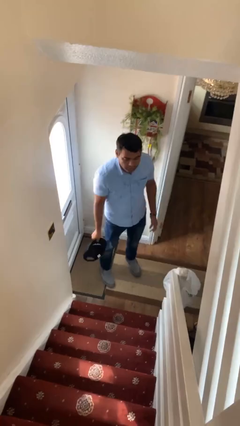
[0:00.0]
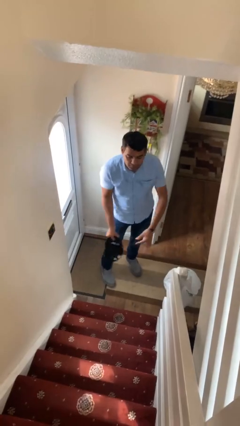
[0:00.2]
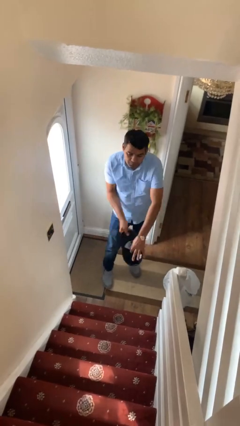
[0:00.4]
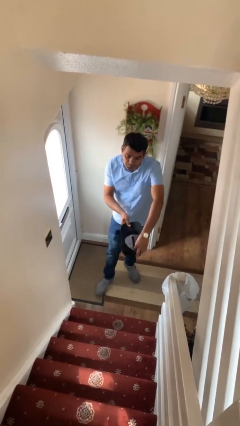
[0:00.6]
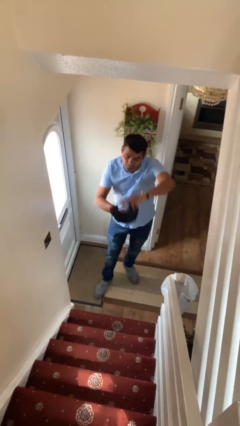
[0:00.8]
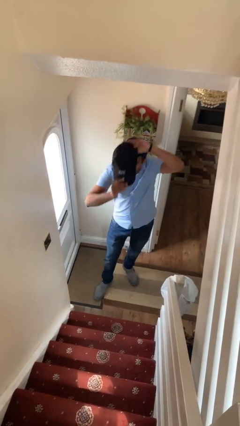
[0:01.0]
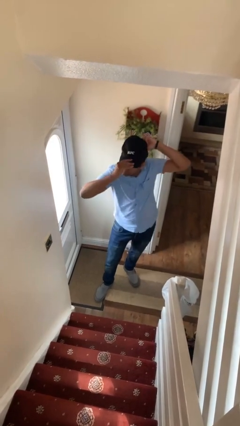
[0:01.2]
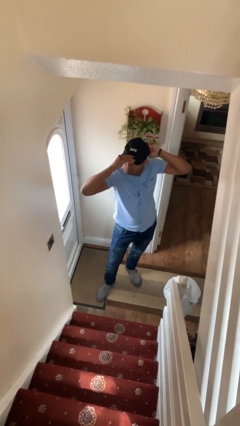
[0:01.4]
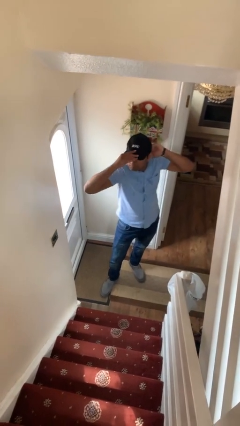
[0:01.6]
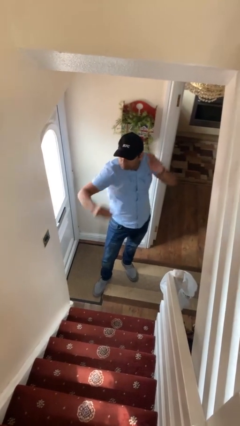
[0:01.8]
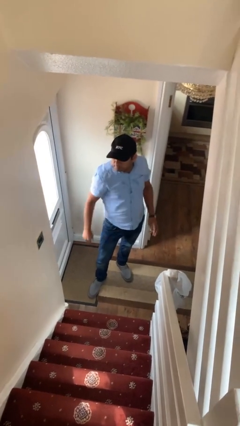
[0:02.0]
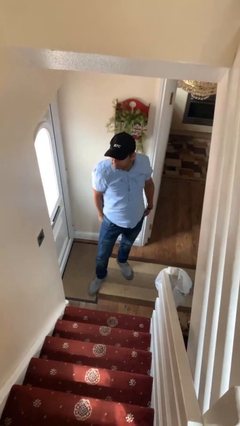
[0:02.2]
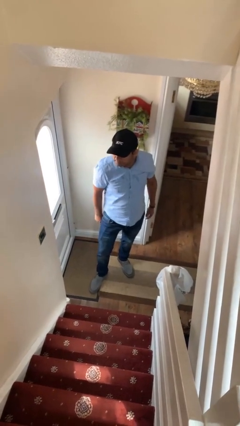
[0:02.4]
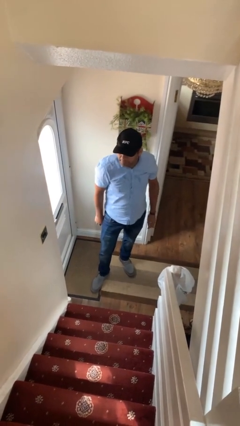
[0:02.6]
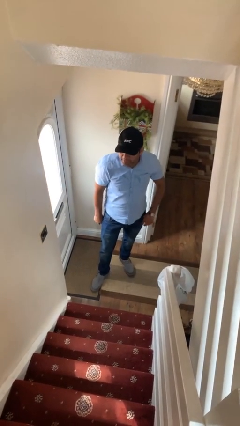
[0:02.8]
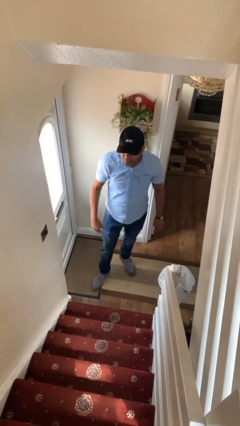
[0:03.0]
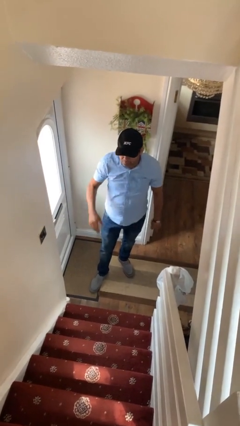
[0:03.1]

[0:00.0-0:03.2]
person puts on hat

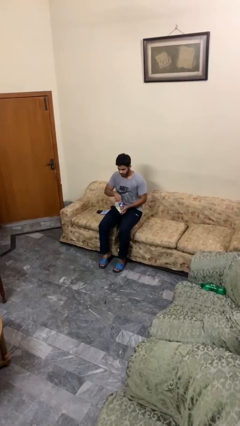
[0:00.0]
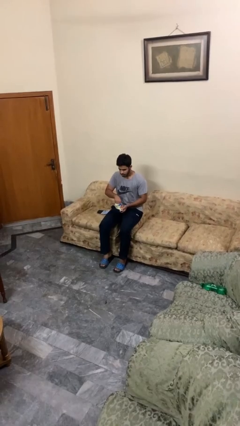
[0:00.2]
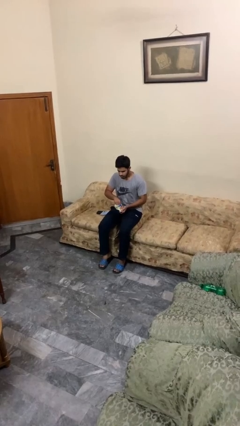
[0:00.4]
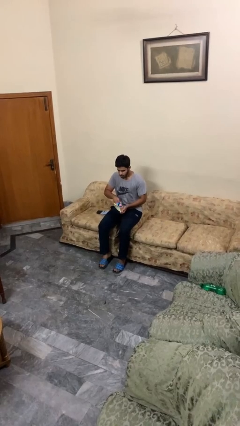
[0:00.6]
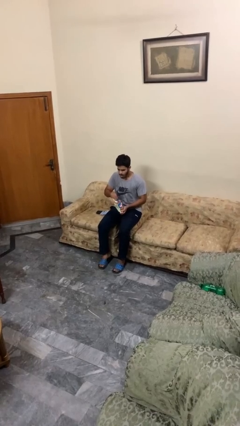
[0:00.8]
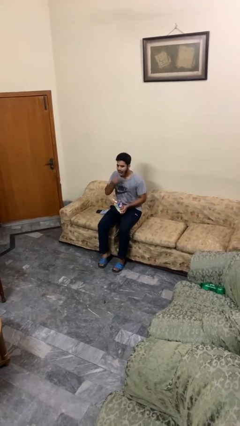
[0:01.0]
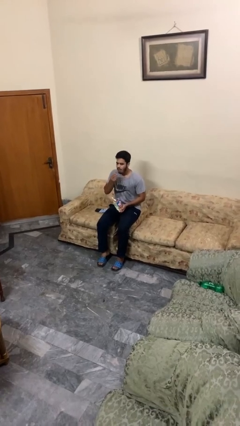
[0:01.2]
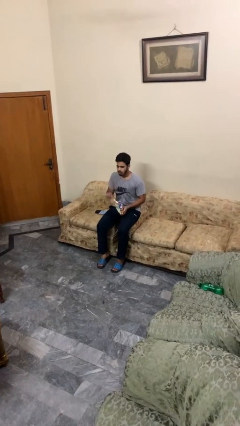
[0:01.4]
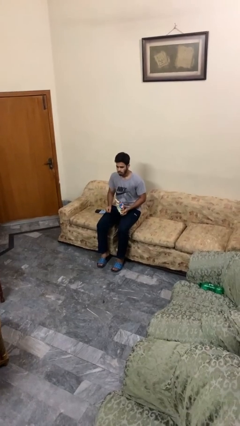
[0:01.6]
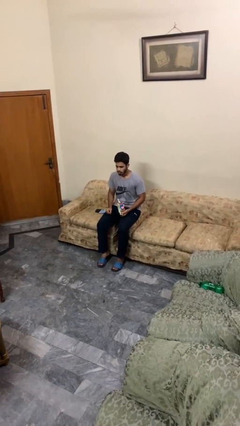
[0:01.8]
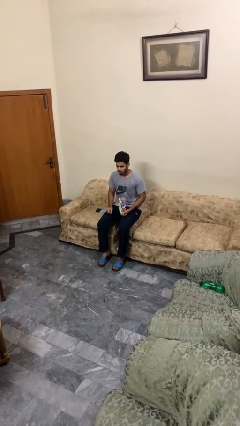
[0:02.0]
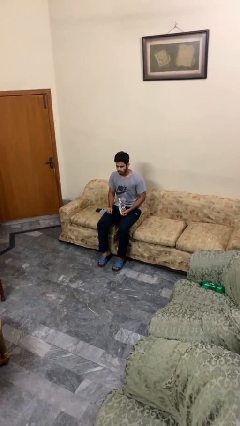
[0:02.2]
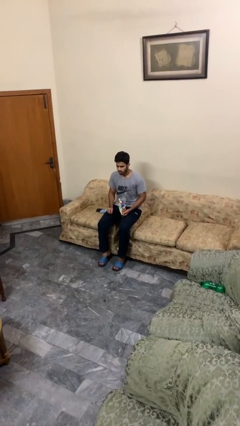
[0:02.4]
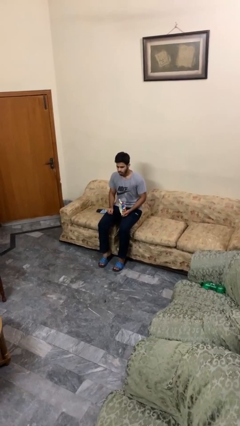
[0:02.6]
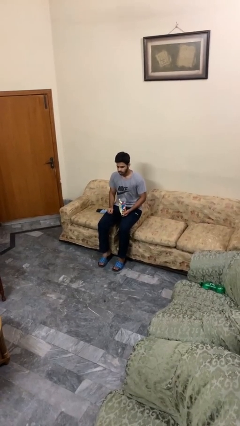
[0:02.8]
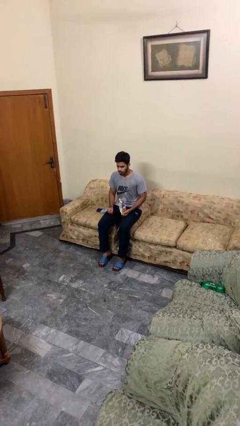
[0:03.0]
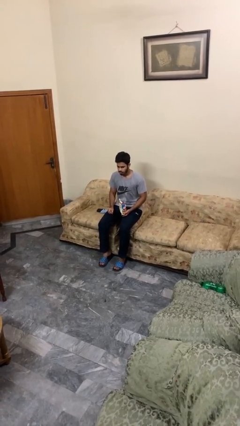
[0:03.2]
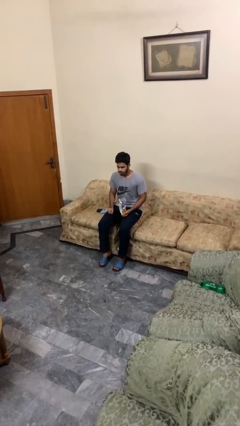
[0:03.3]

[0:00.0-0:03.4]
person eats snack from bag

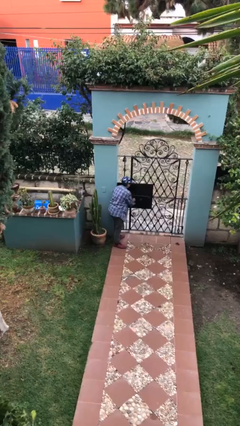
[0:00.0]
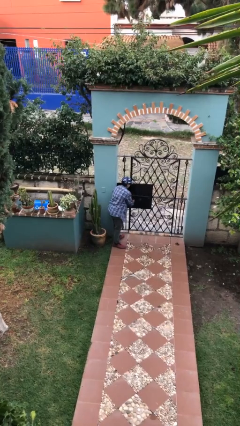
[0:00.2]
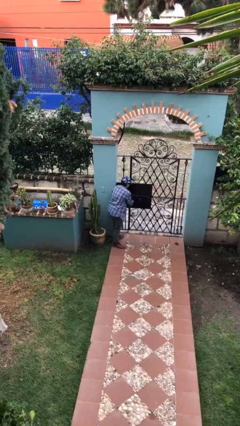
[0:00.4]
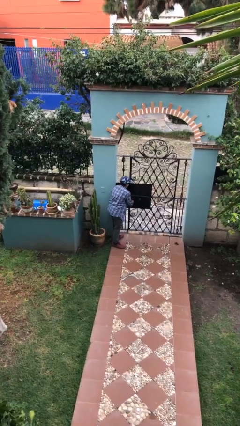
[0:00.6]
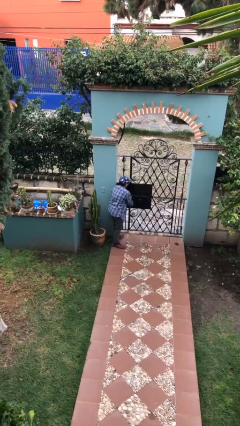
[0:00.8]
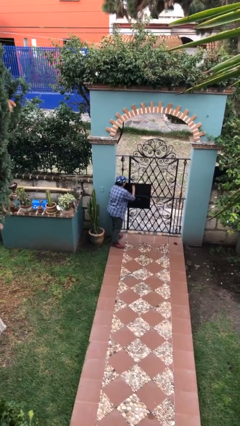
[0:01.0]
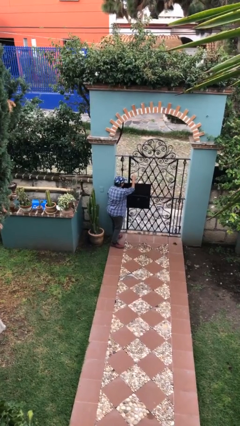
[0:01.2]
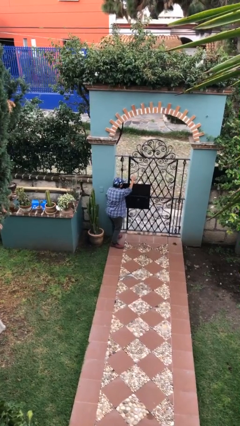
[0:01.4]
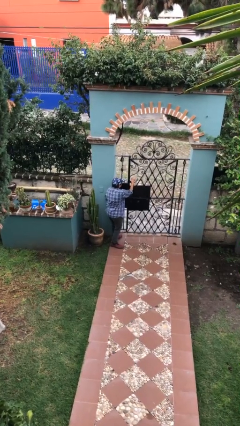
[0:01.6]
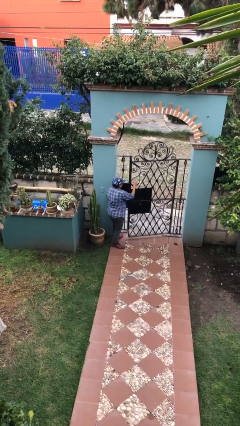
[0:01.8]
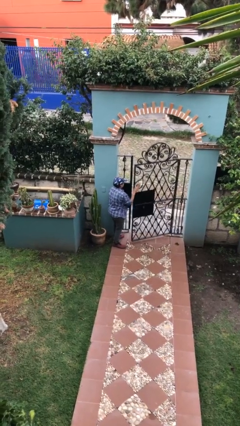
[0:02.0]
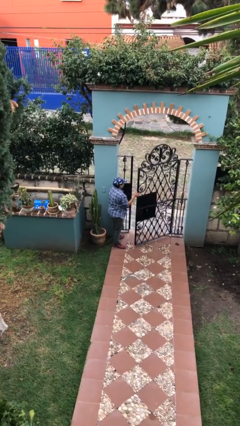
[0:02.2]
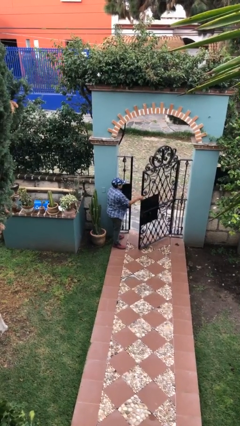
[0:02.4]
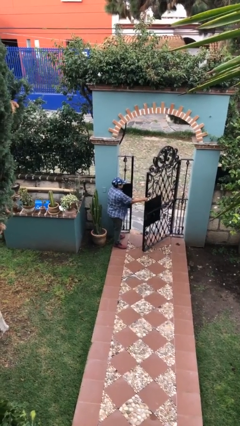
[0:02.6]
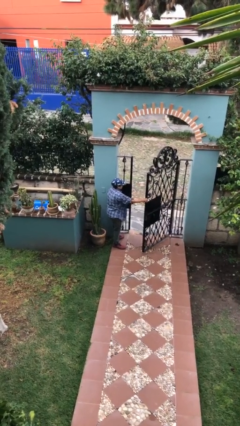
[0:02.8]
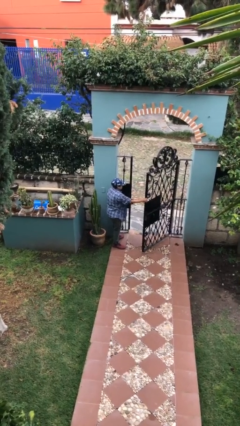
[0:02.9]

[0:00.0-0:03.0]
person opens facility door

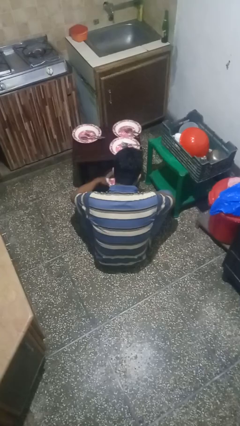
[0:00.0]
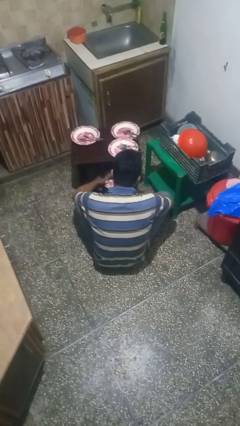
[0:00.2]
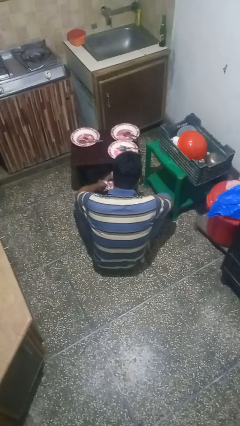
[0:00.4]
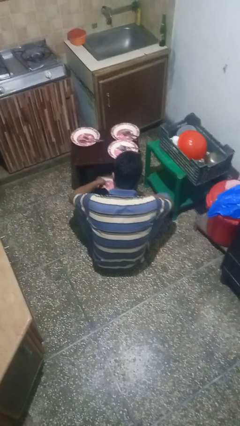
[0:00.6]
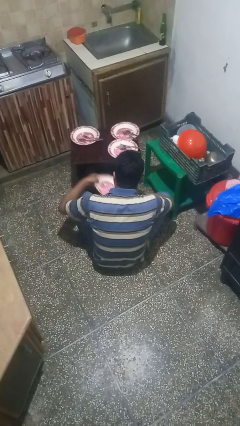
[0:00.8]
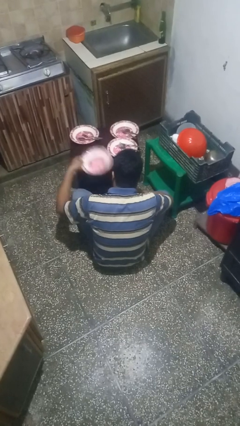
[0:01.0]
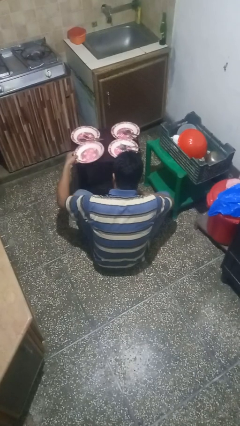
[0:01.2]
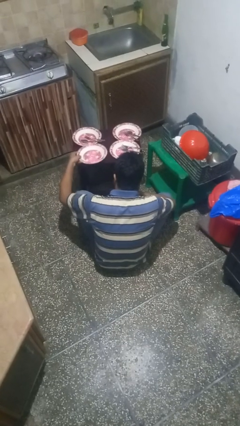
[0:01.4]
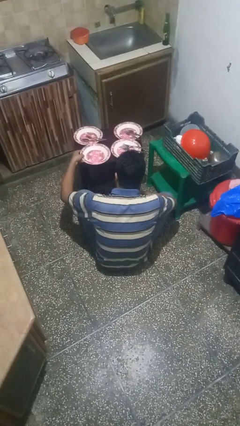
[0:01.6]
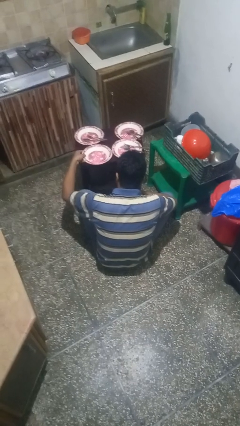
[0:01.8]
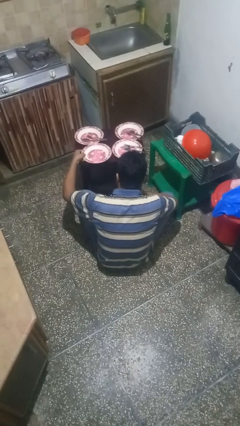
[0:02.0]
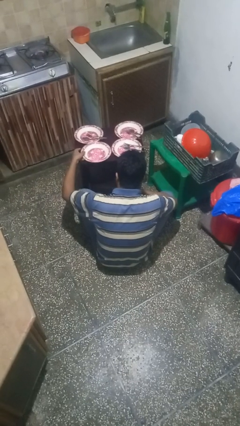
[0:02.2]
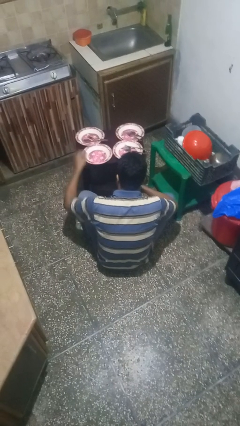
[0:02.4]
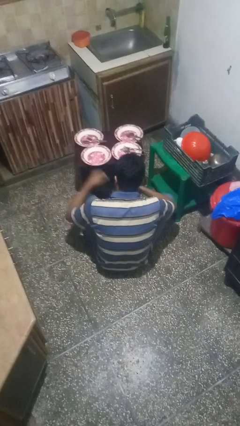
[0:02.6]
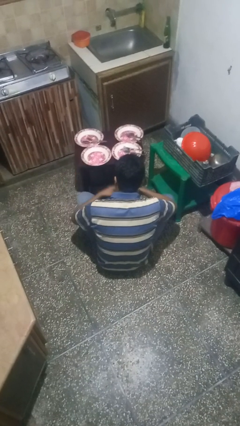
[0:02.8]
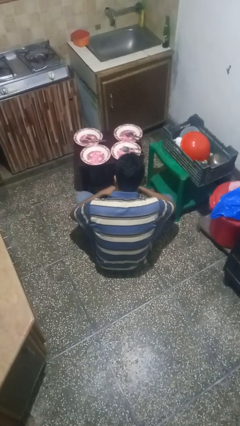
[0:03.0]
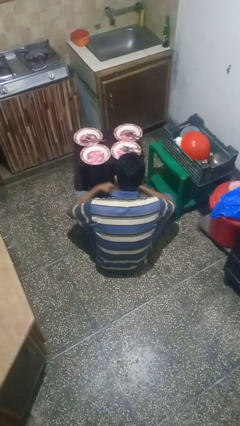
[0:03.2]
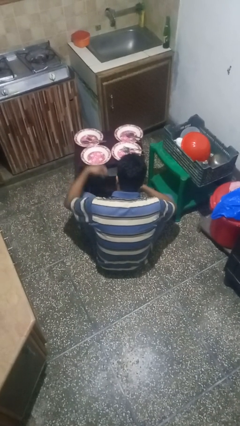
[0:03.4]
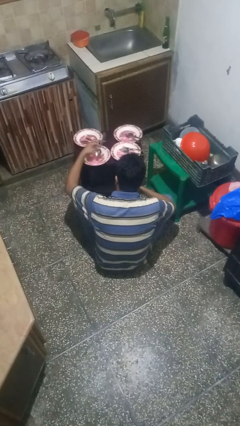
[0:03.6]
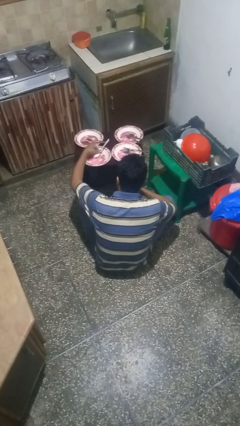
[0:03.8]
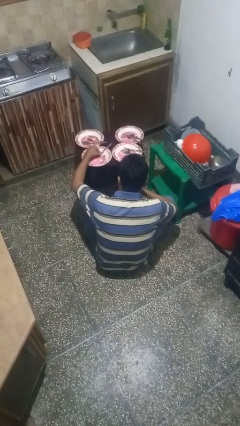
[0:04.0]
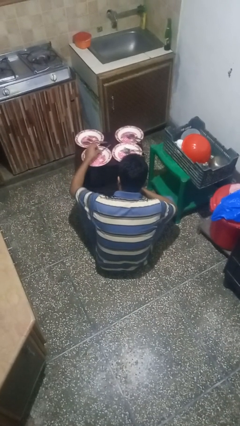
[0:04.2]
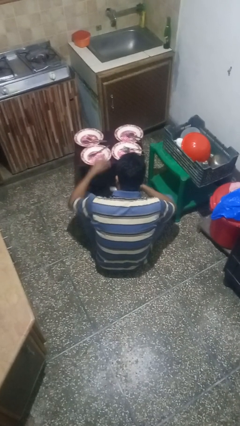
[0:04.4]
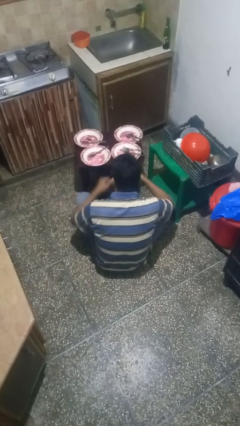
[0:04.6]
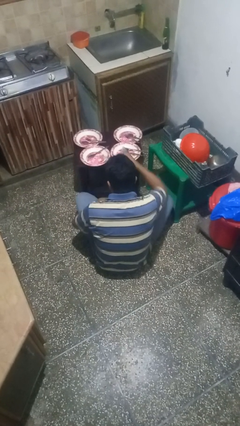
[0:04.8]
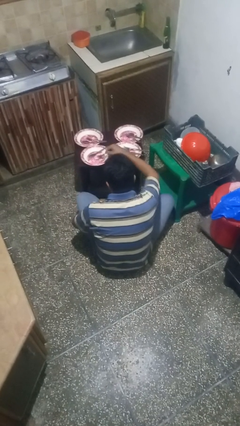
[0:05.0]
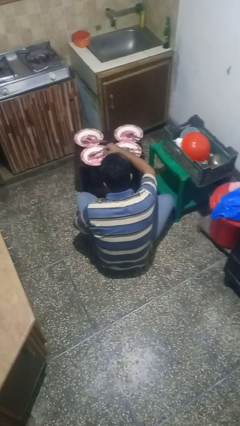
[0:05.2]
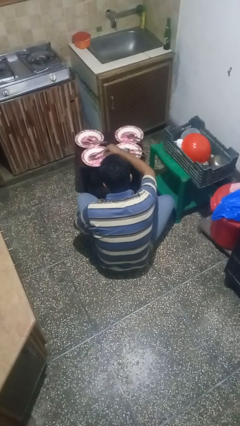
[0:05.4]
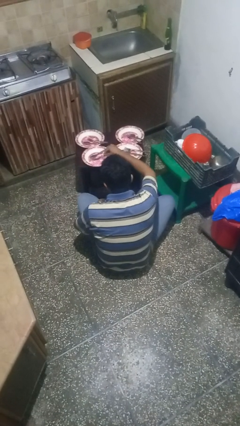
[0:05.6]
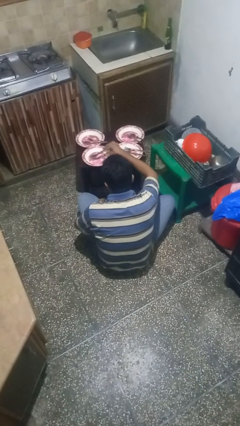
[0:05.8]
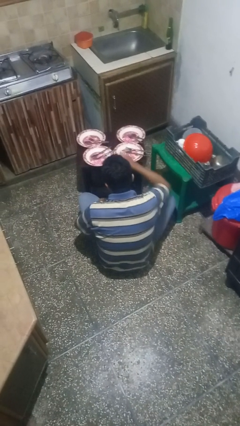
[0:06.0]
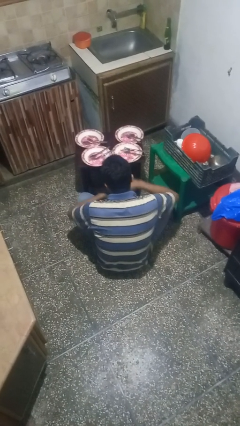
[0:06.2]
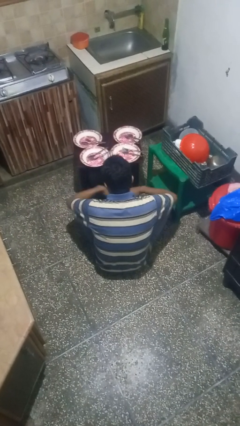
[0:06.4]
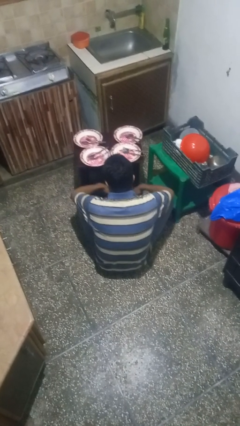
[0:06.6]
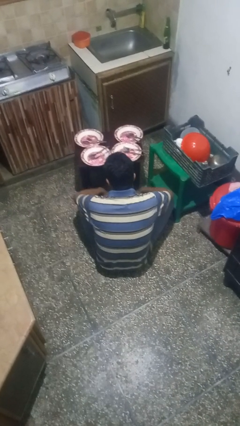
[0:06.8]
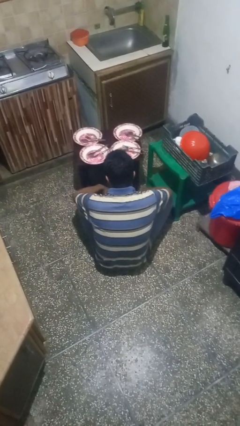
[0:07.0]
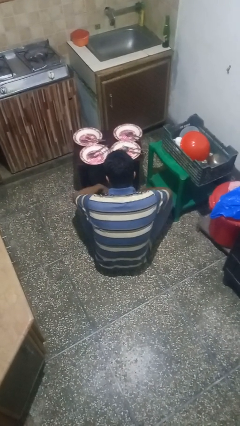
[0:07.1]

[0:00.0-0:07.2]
person sets table

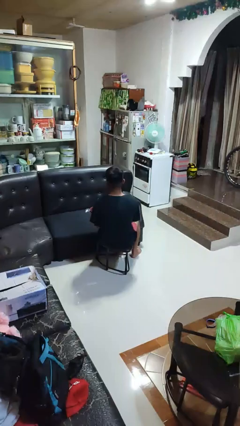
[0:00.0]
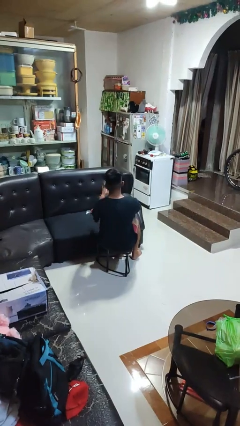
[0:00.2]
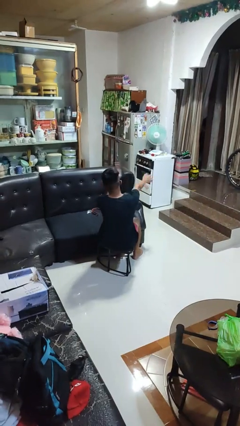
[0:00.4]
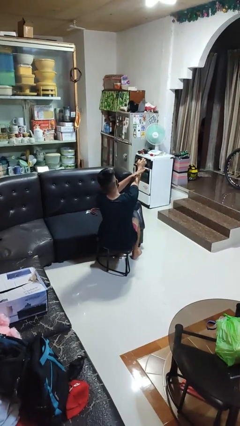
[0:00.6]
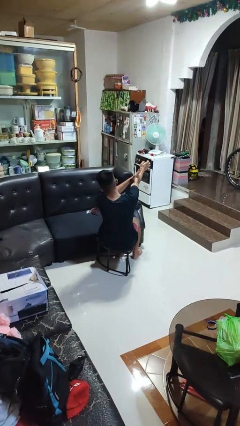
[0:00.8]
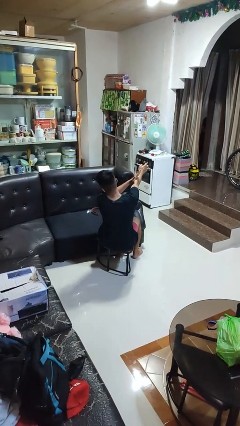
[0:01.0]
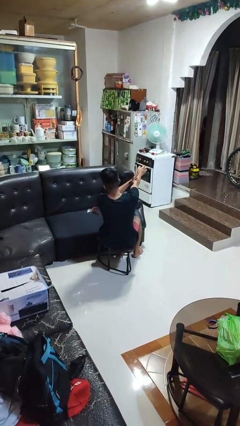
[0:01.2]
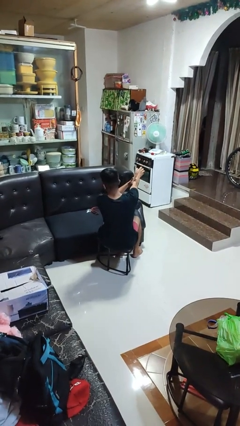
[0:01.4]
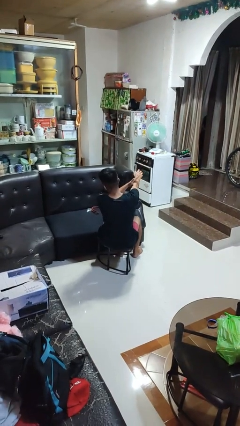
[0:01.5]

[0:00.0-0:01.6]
person swats bug
